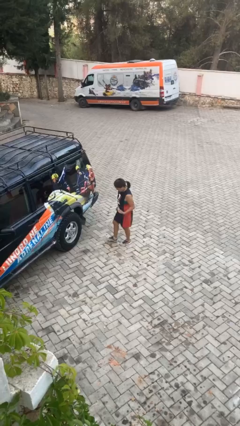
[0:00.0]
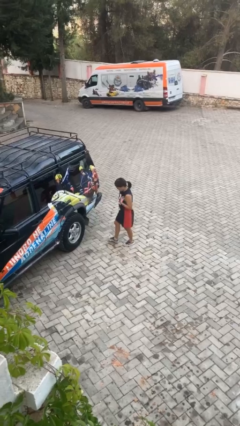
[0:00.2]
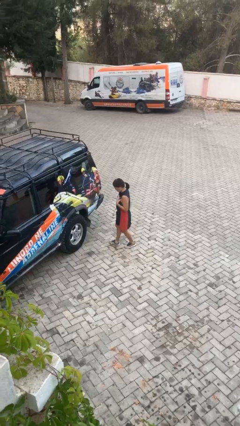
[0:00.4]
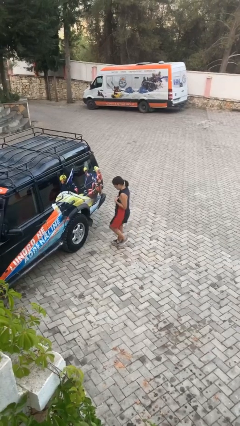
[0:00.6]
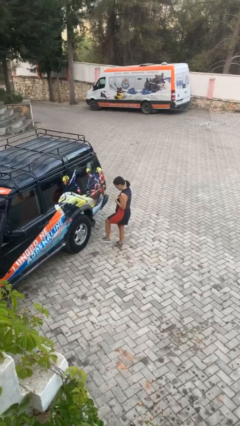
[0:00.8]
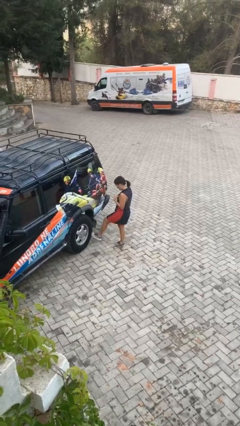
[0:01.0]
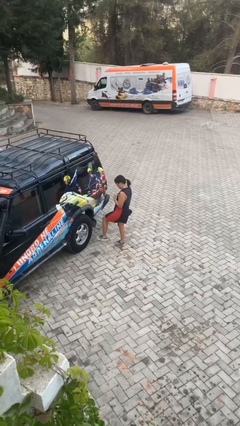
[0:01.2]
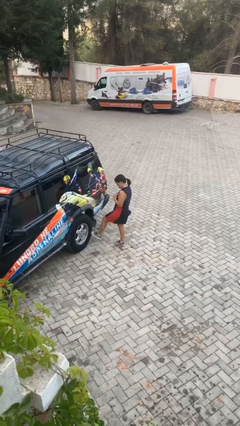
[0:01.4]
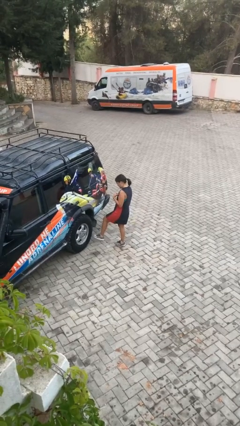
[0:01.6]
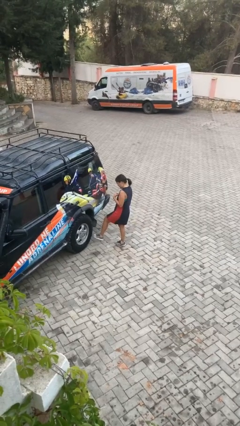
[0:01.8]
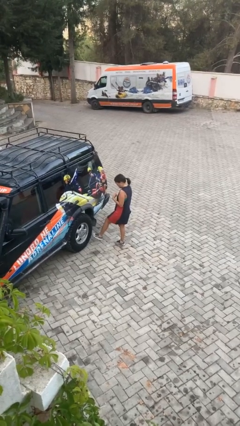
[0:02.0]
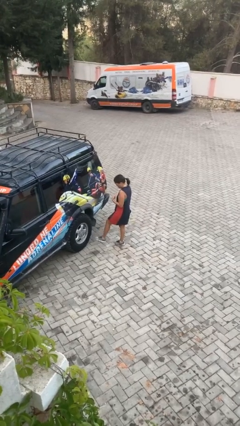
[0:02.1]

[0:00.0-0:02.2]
person kicks car tires

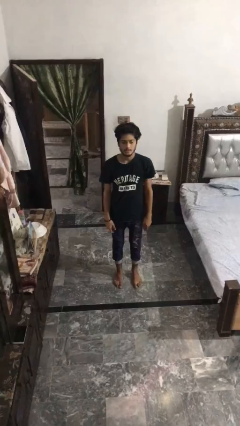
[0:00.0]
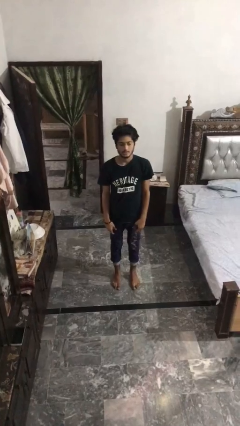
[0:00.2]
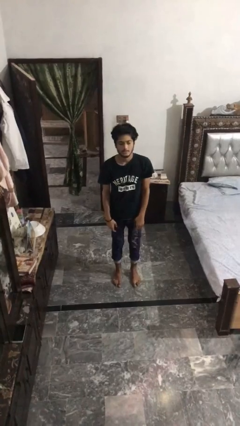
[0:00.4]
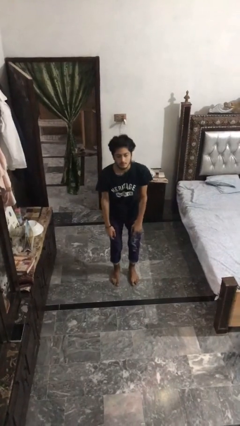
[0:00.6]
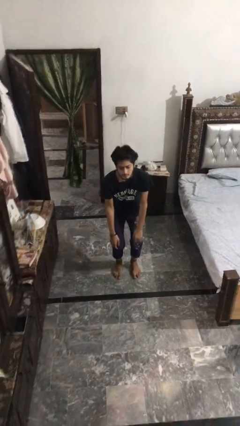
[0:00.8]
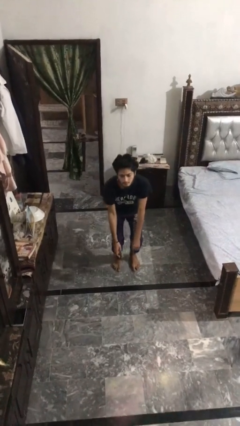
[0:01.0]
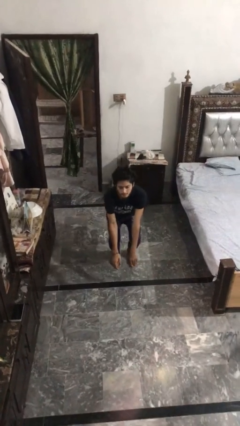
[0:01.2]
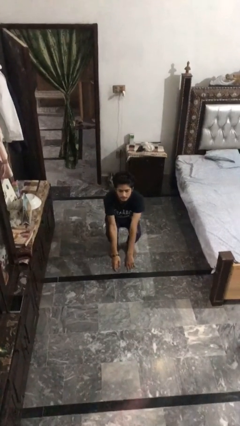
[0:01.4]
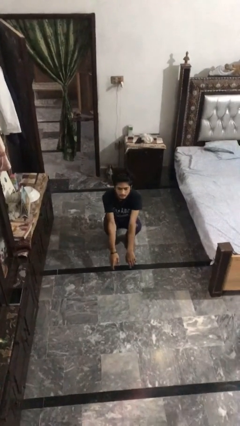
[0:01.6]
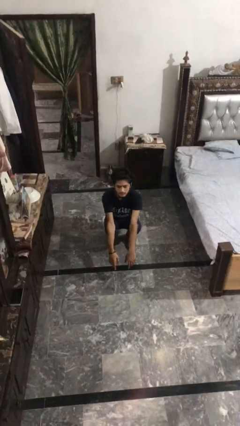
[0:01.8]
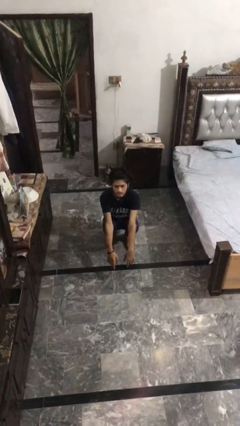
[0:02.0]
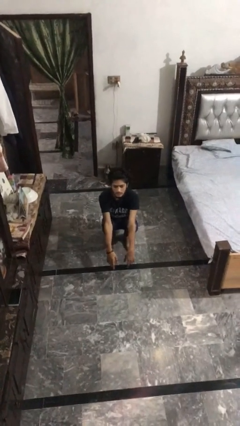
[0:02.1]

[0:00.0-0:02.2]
person squats

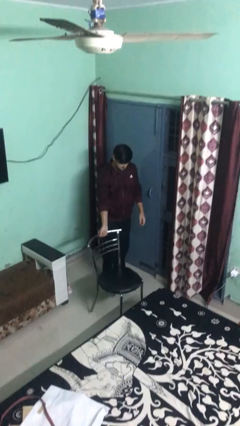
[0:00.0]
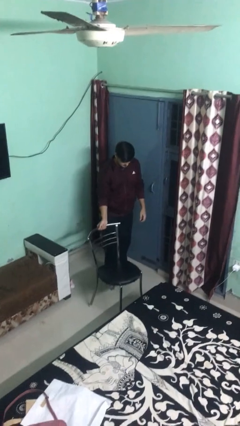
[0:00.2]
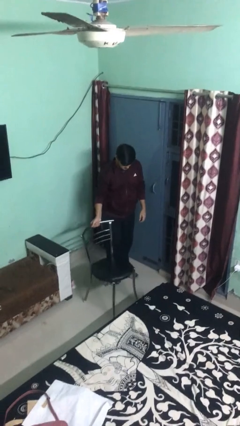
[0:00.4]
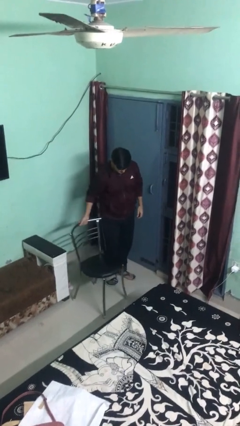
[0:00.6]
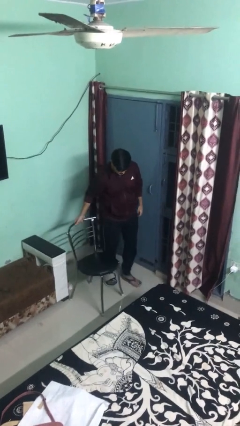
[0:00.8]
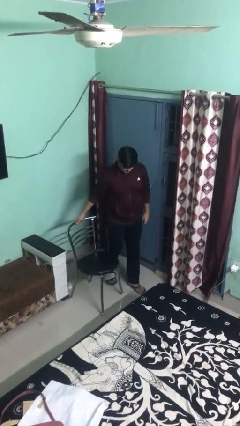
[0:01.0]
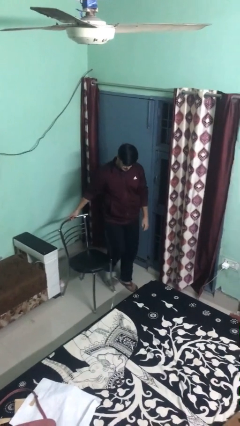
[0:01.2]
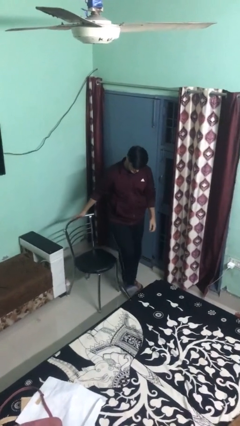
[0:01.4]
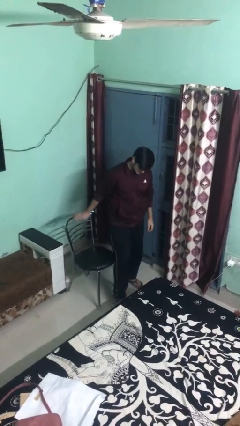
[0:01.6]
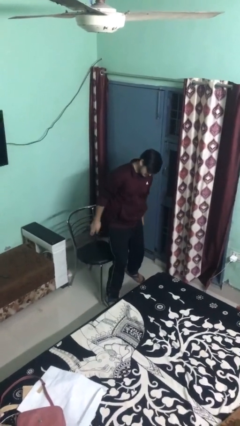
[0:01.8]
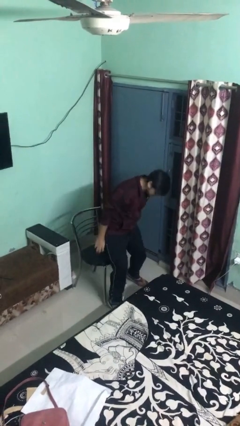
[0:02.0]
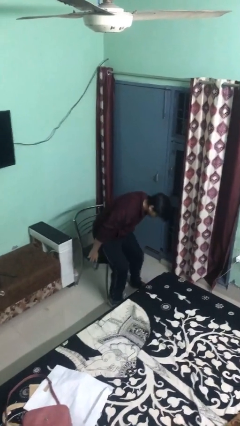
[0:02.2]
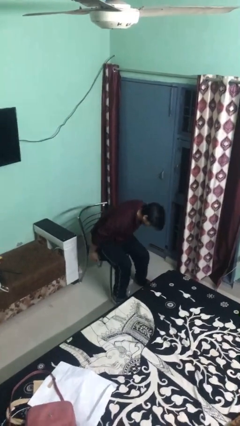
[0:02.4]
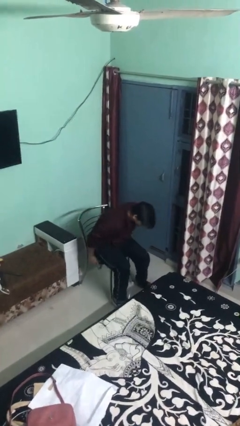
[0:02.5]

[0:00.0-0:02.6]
person sits down

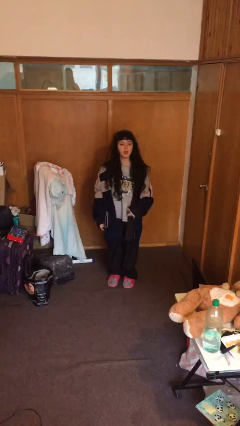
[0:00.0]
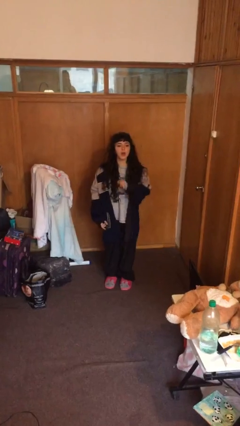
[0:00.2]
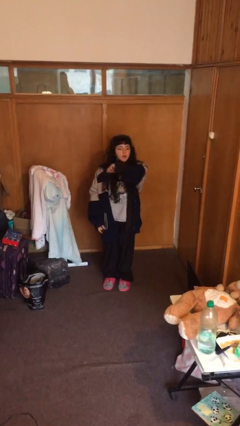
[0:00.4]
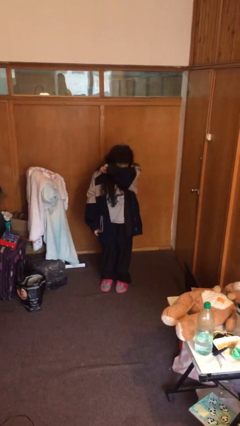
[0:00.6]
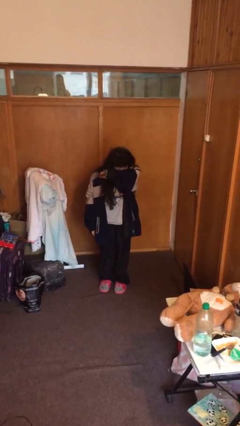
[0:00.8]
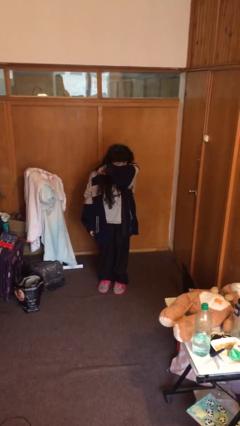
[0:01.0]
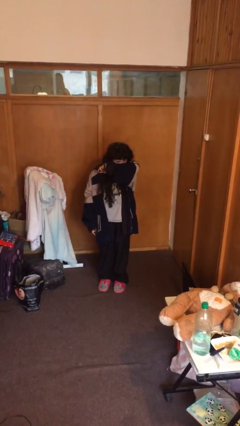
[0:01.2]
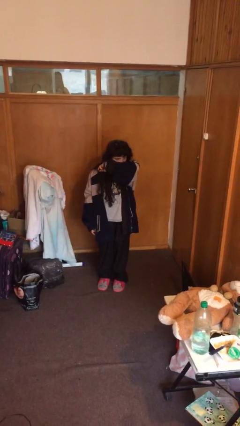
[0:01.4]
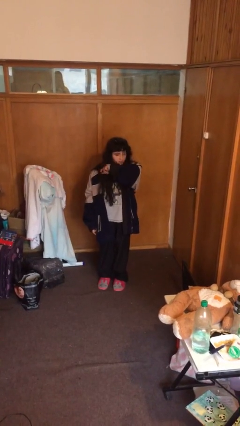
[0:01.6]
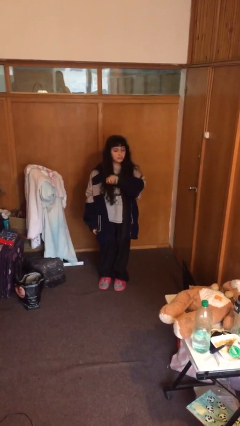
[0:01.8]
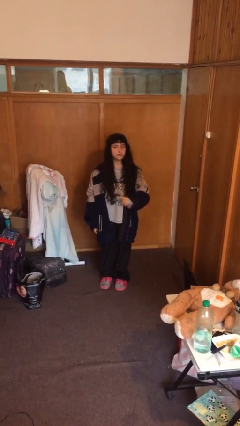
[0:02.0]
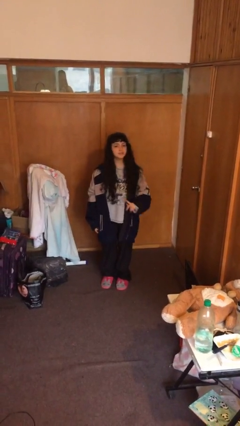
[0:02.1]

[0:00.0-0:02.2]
person sneezes into arm

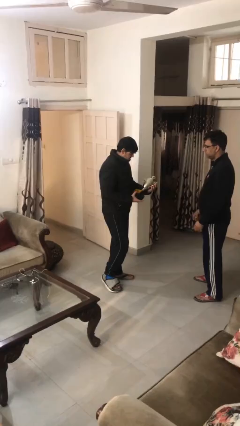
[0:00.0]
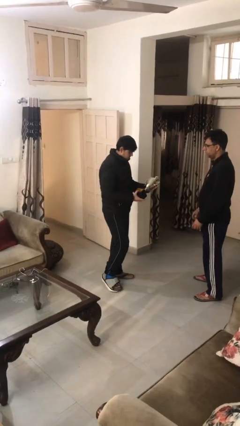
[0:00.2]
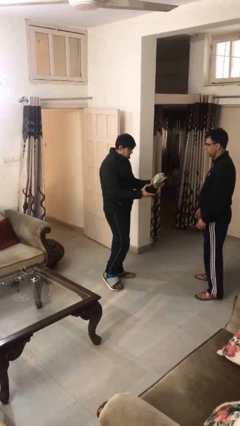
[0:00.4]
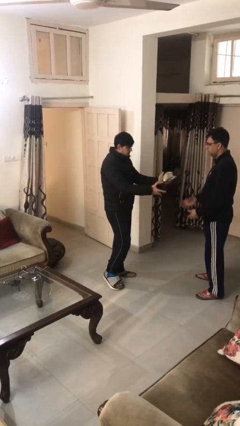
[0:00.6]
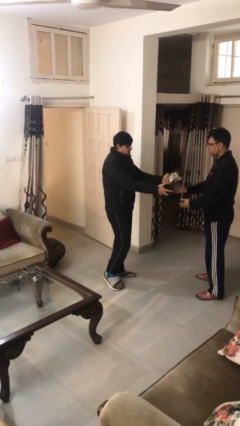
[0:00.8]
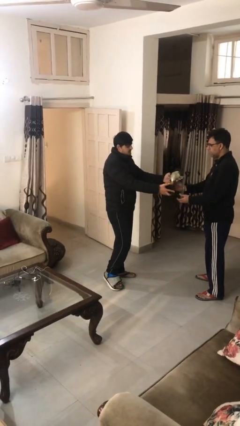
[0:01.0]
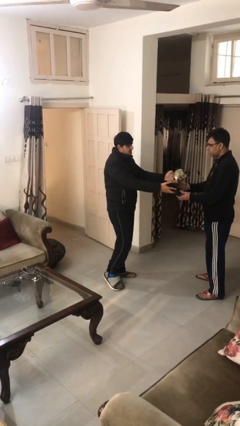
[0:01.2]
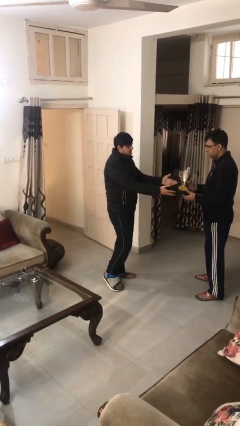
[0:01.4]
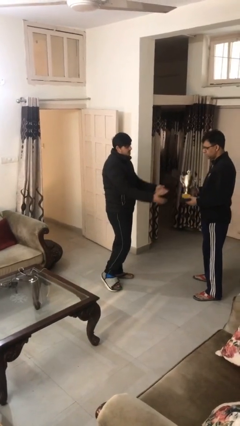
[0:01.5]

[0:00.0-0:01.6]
person transfers object to person

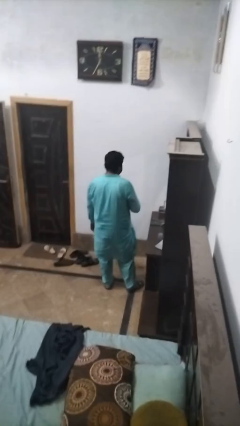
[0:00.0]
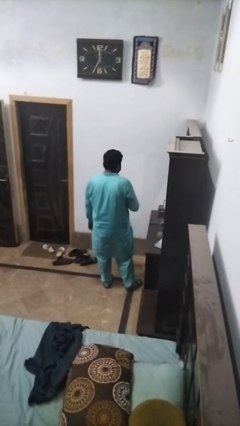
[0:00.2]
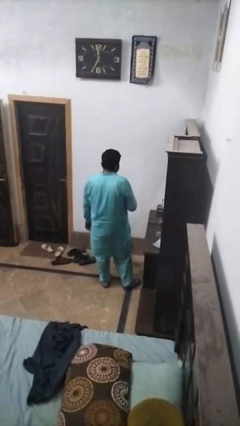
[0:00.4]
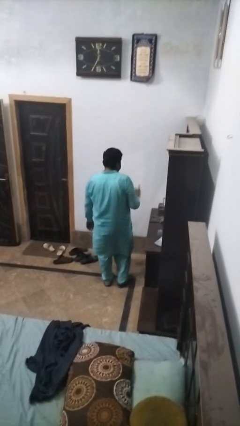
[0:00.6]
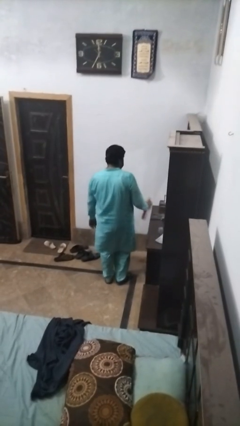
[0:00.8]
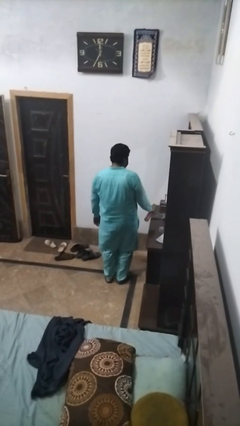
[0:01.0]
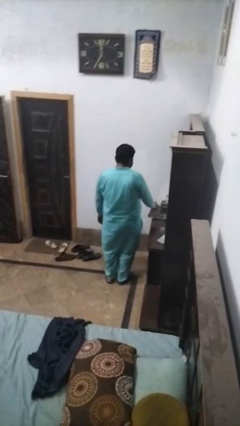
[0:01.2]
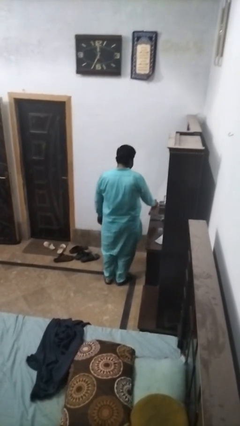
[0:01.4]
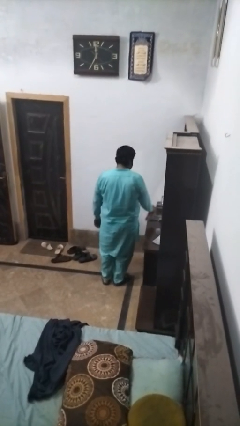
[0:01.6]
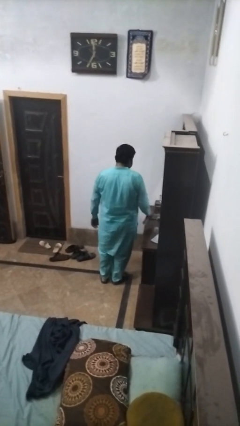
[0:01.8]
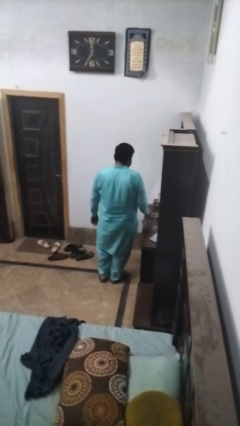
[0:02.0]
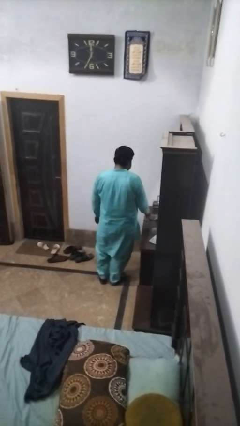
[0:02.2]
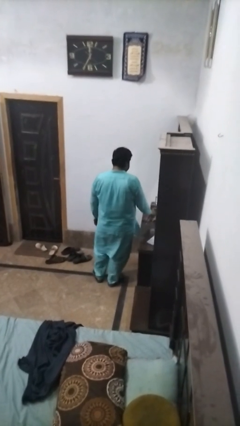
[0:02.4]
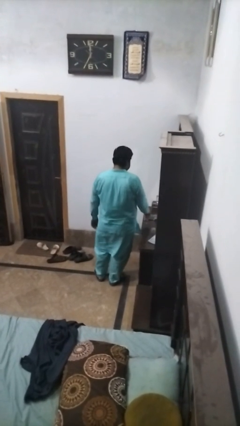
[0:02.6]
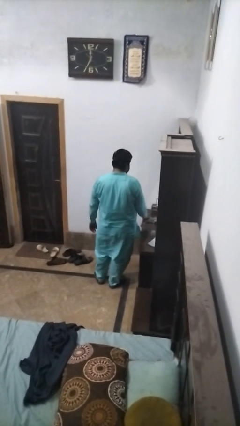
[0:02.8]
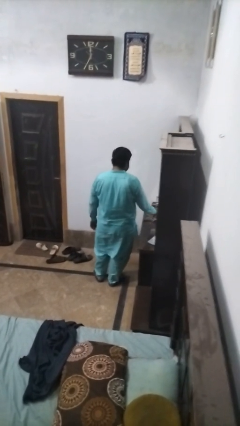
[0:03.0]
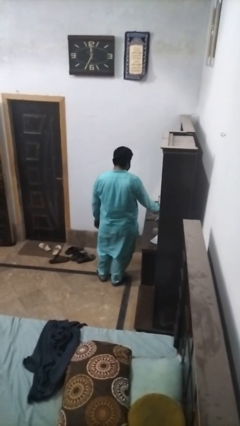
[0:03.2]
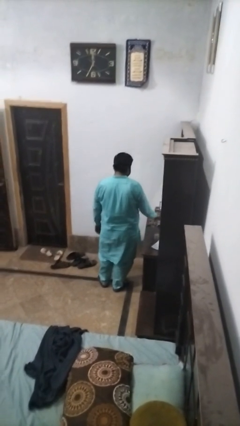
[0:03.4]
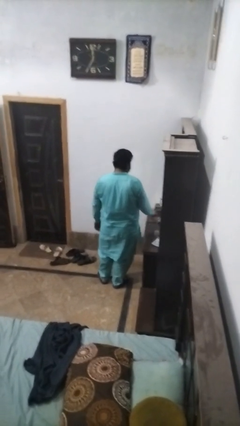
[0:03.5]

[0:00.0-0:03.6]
person sprays from bottle

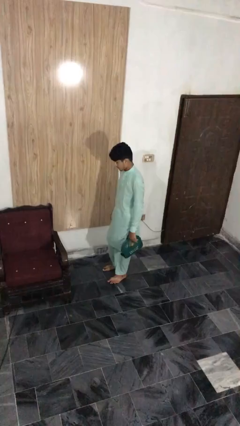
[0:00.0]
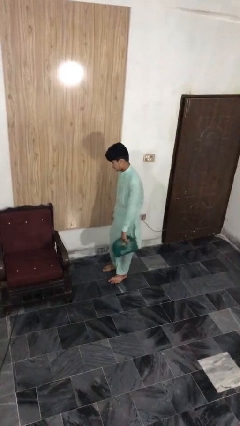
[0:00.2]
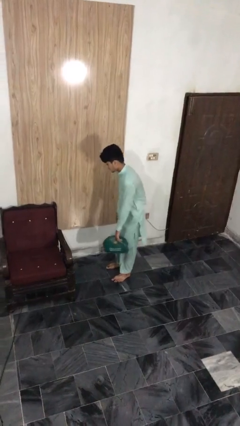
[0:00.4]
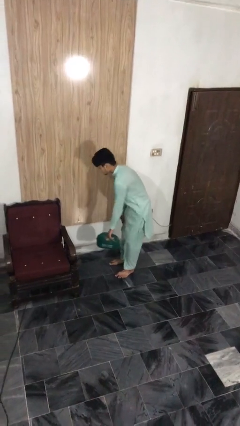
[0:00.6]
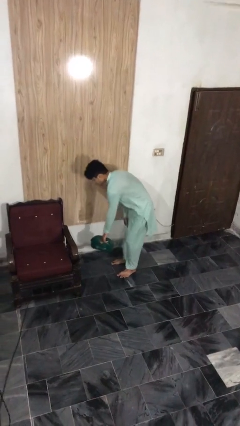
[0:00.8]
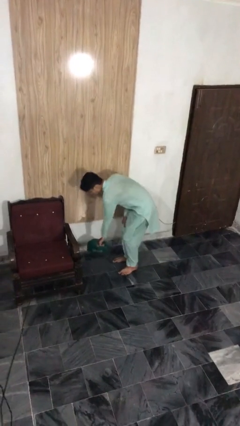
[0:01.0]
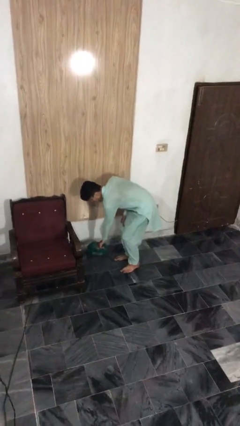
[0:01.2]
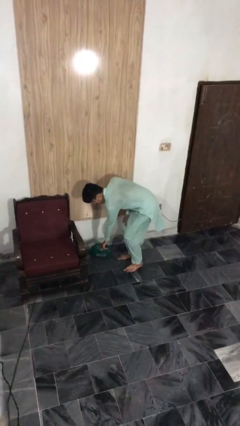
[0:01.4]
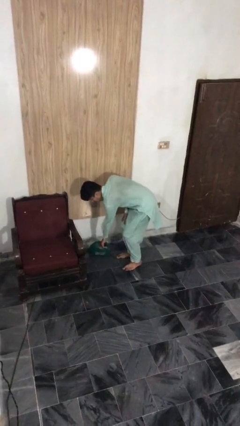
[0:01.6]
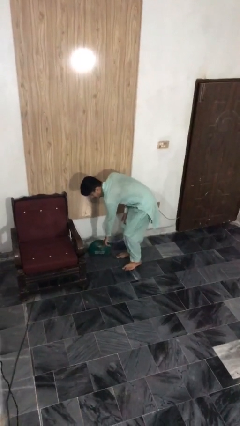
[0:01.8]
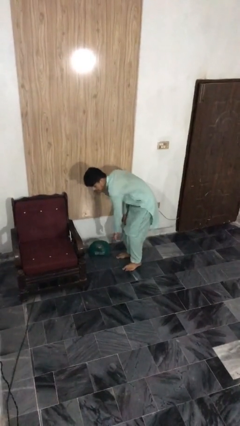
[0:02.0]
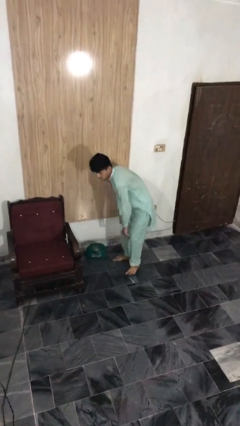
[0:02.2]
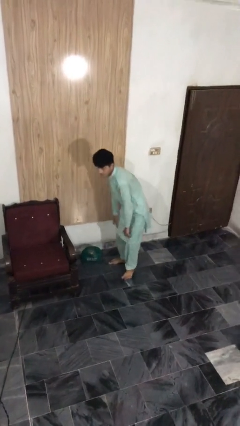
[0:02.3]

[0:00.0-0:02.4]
person puts down object on floor

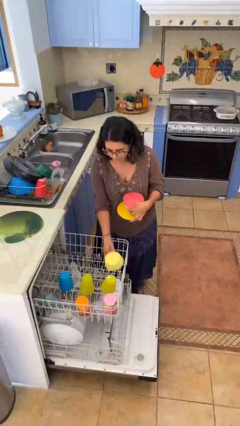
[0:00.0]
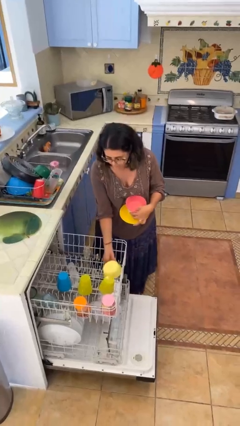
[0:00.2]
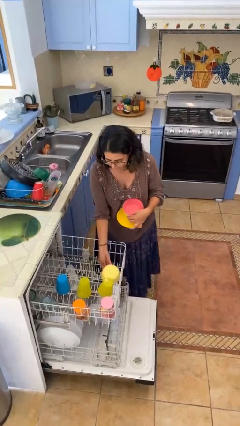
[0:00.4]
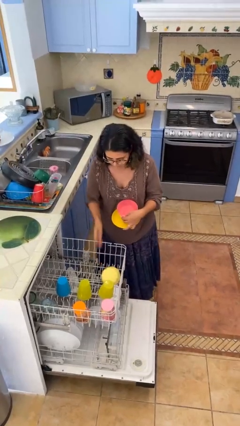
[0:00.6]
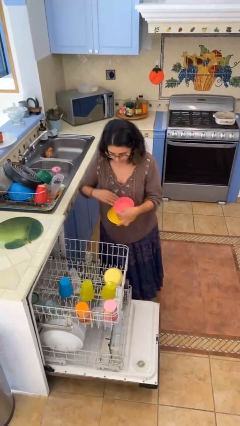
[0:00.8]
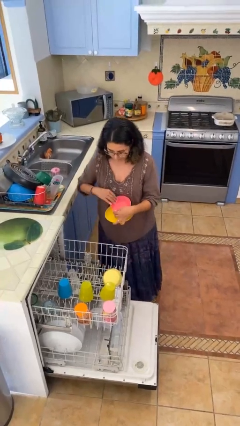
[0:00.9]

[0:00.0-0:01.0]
person loads dishwasher
